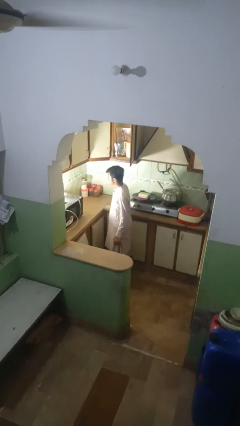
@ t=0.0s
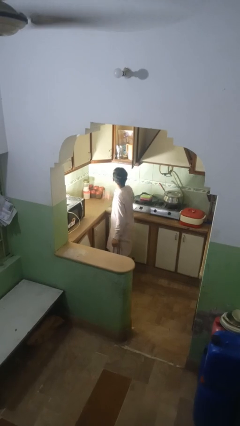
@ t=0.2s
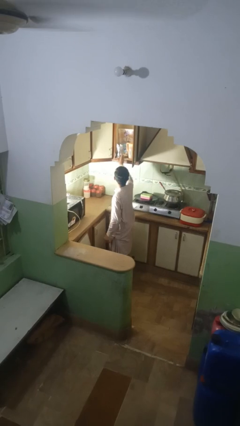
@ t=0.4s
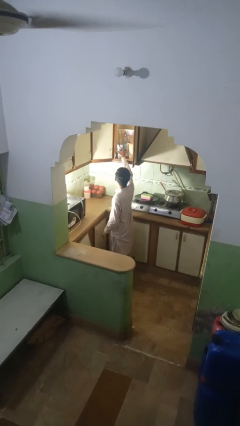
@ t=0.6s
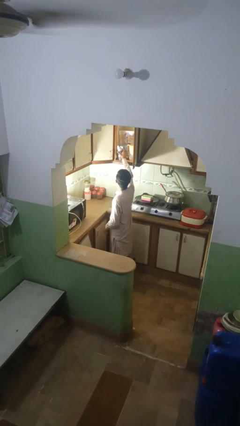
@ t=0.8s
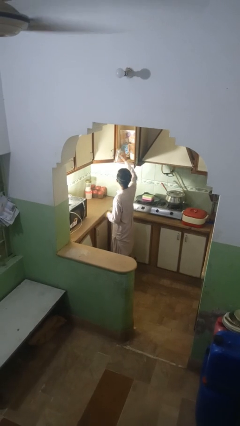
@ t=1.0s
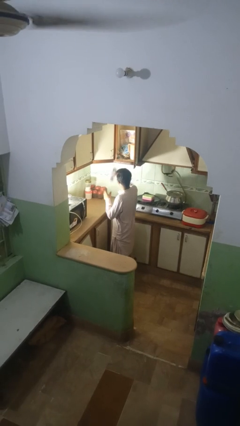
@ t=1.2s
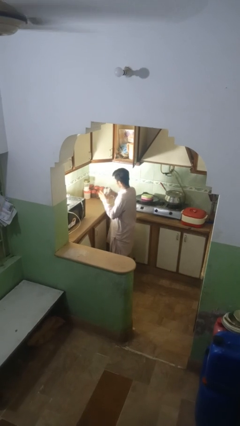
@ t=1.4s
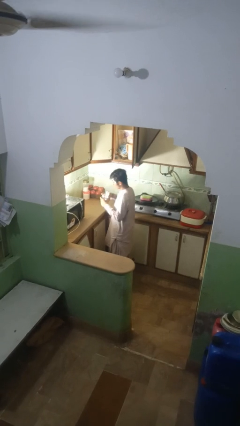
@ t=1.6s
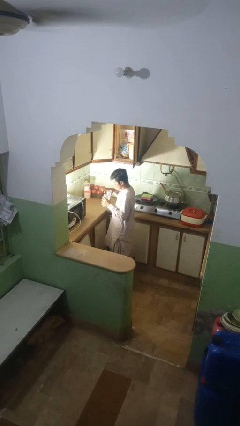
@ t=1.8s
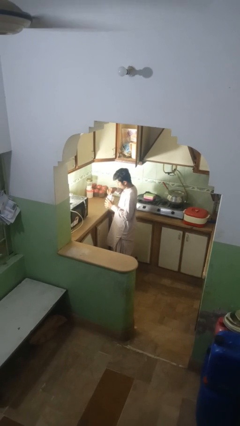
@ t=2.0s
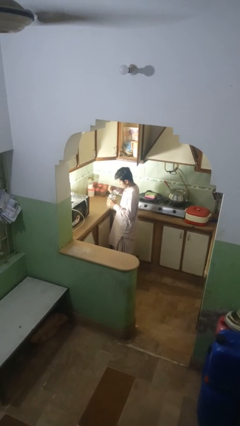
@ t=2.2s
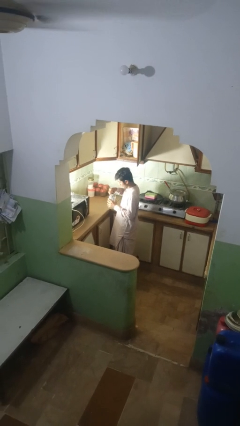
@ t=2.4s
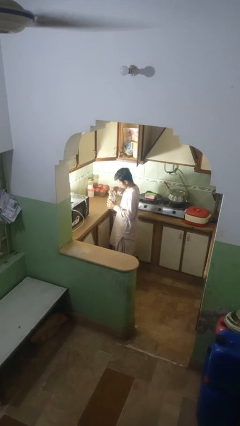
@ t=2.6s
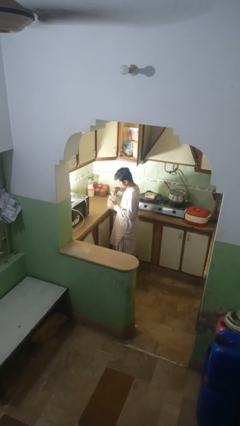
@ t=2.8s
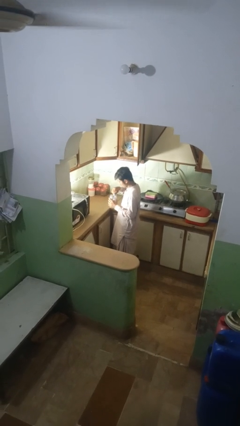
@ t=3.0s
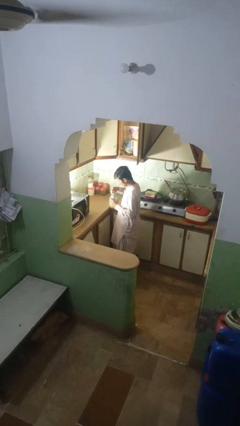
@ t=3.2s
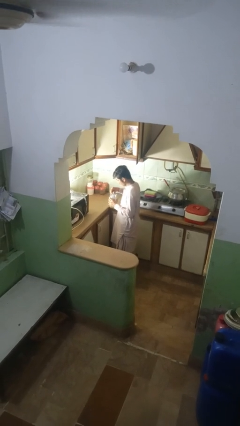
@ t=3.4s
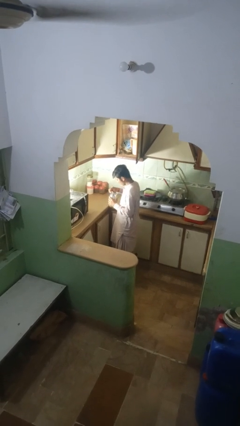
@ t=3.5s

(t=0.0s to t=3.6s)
person takes object from kitchen drawer

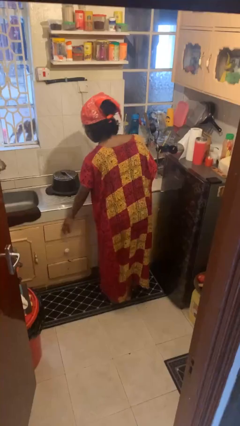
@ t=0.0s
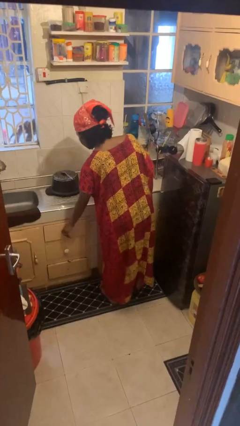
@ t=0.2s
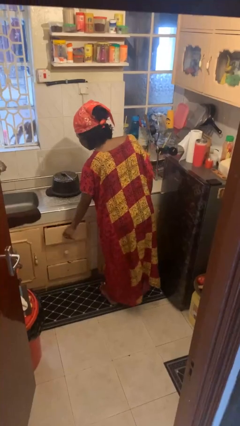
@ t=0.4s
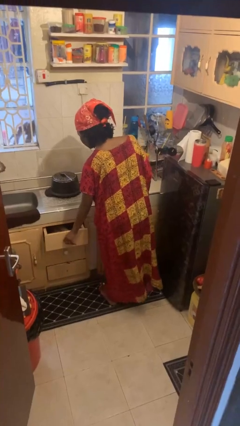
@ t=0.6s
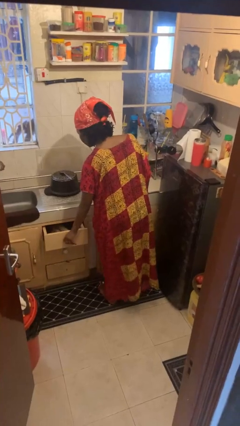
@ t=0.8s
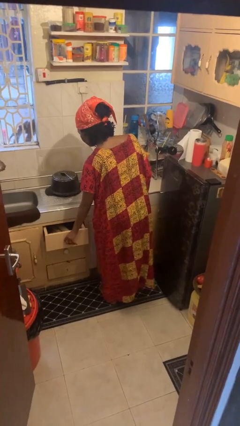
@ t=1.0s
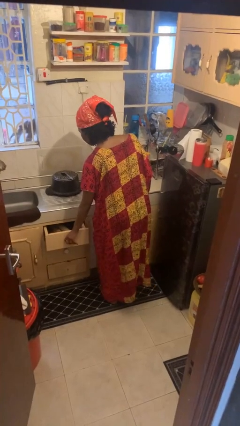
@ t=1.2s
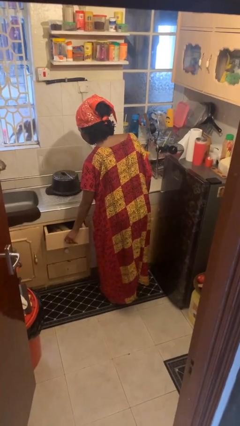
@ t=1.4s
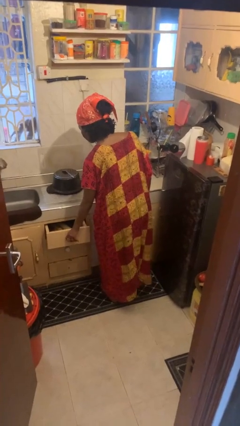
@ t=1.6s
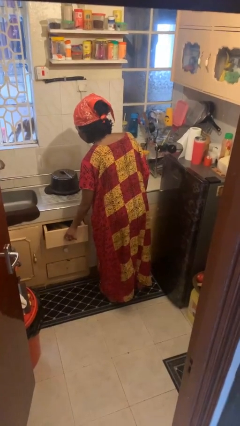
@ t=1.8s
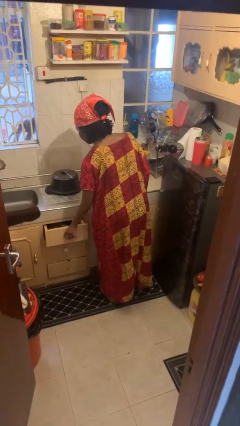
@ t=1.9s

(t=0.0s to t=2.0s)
person opens kitchen drawer

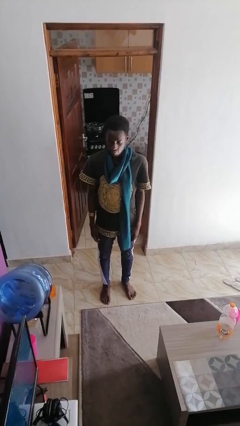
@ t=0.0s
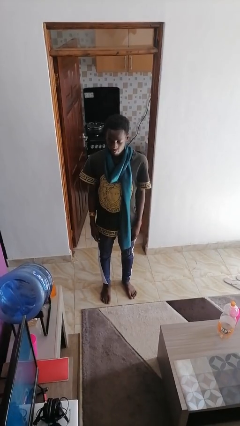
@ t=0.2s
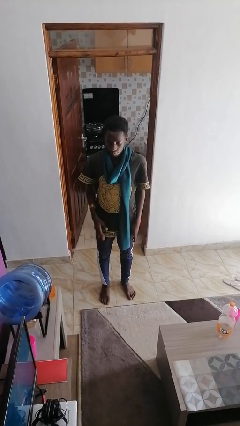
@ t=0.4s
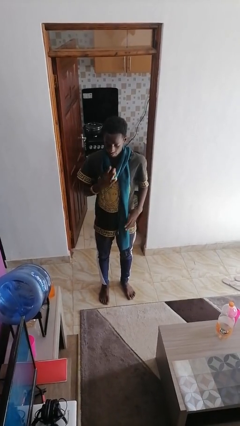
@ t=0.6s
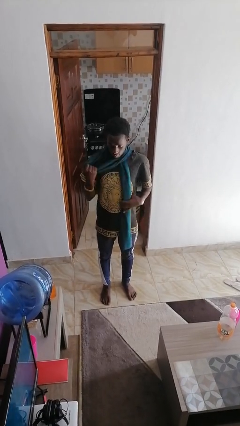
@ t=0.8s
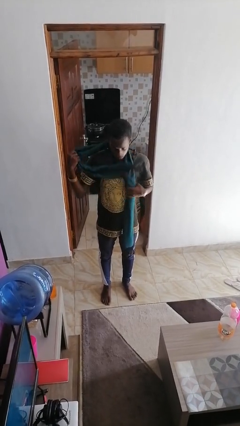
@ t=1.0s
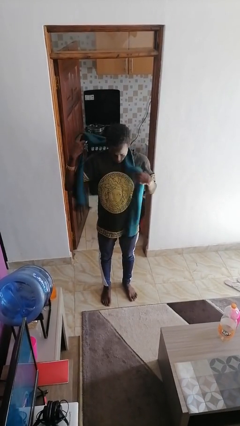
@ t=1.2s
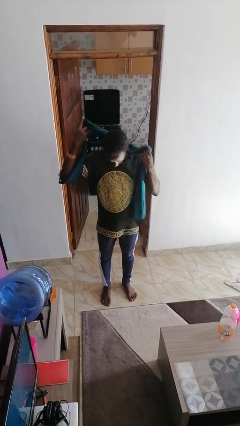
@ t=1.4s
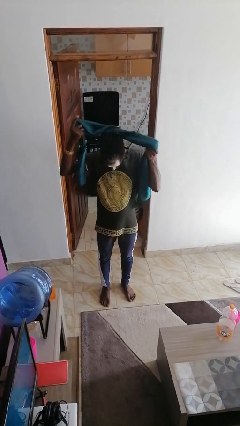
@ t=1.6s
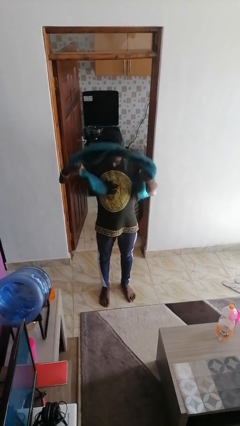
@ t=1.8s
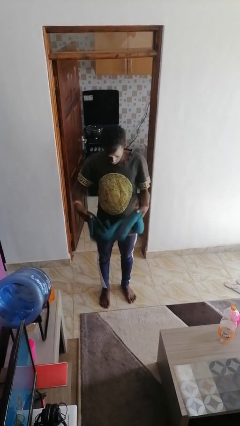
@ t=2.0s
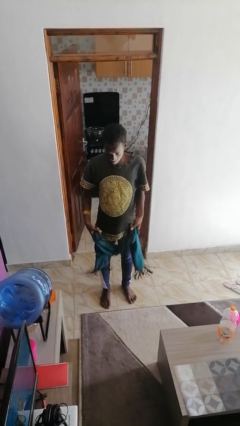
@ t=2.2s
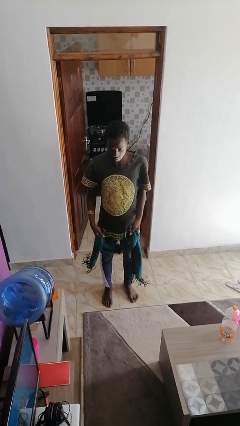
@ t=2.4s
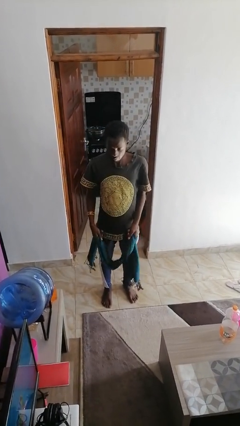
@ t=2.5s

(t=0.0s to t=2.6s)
person takes off scarf

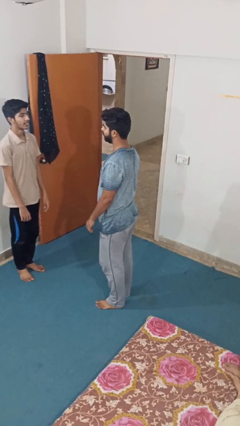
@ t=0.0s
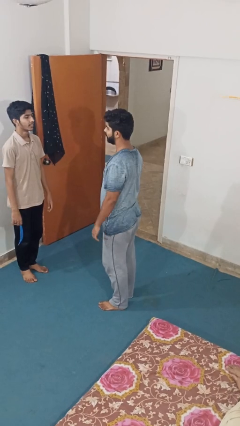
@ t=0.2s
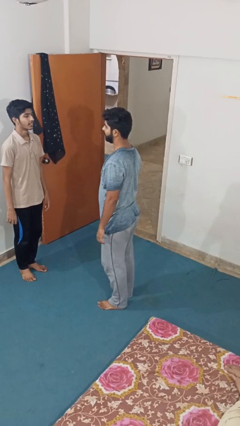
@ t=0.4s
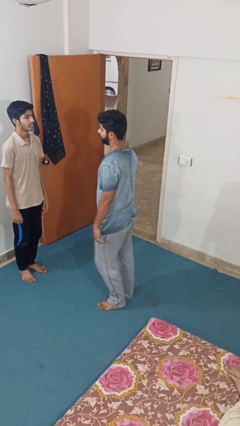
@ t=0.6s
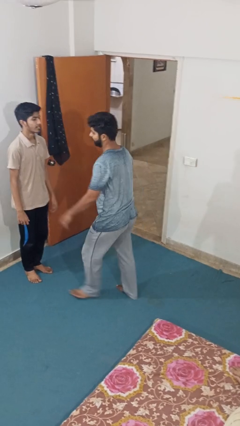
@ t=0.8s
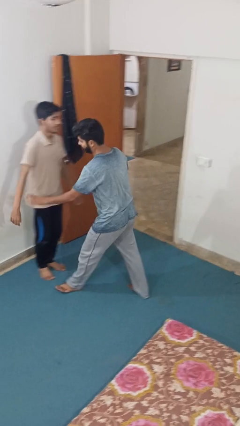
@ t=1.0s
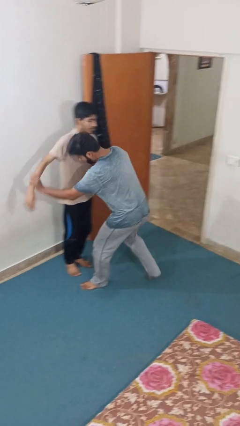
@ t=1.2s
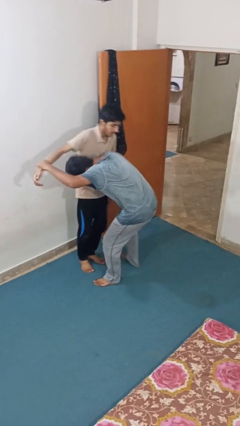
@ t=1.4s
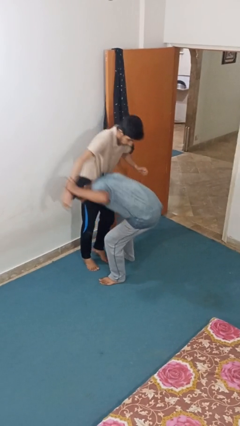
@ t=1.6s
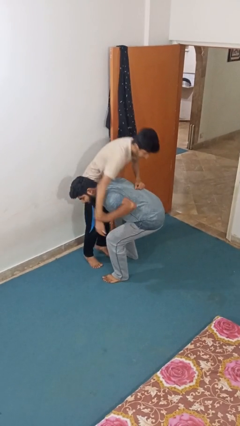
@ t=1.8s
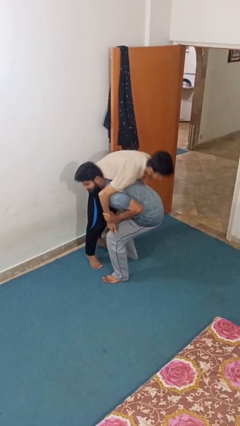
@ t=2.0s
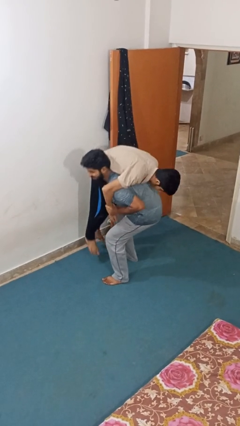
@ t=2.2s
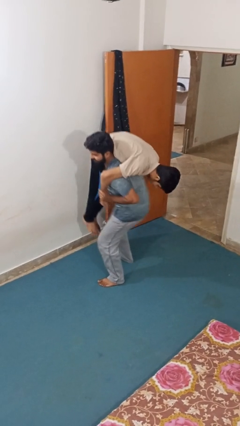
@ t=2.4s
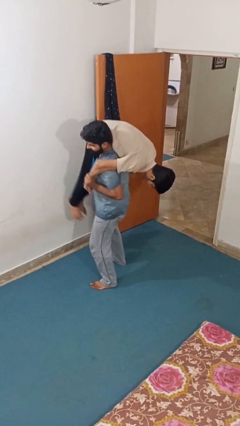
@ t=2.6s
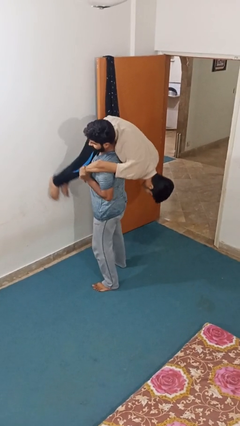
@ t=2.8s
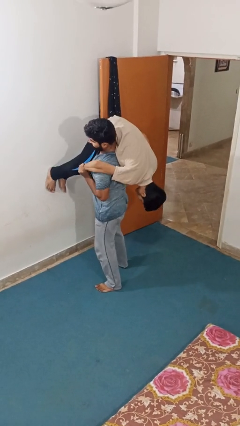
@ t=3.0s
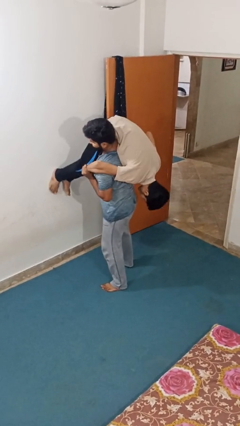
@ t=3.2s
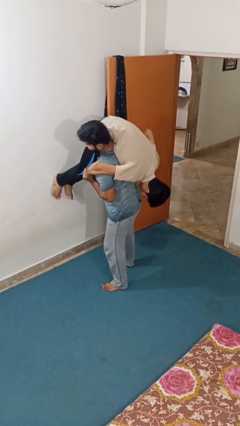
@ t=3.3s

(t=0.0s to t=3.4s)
person carries person over shoulder

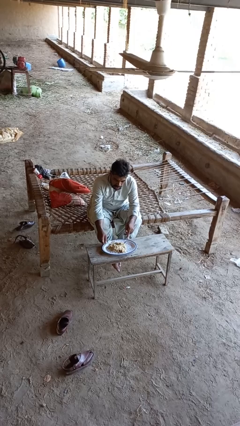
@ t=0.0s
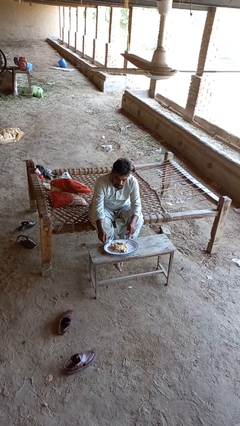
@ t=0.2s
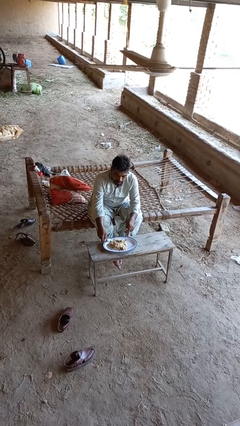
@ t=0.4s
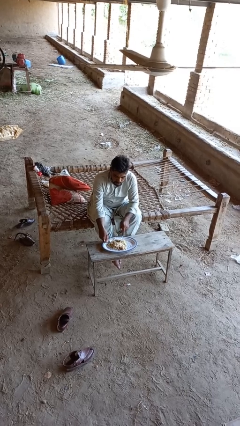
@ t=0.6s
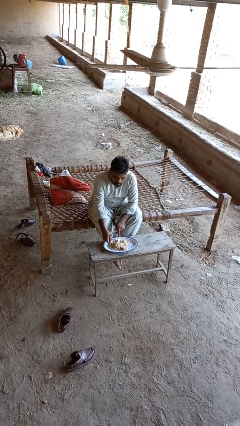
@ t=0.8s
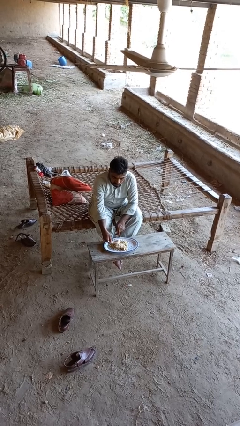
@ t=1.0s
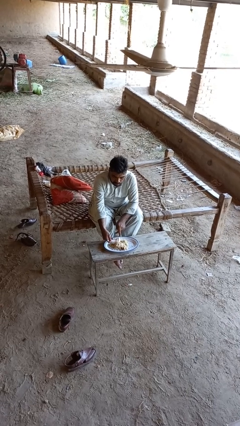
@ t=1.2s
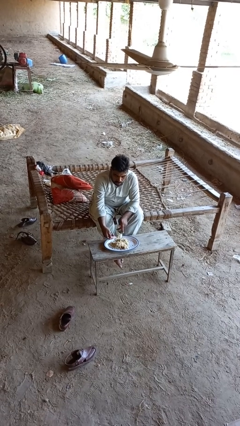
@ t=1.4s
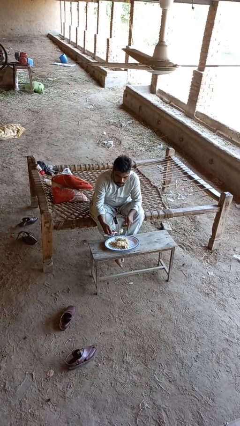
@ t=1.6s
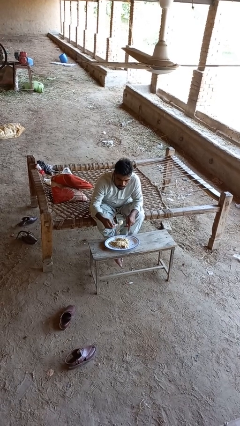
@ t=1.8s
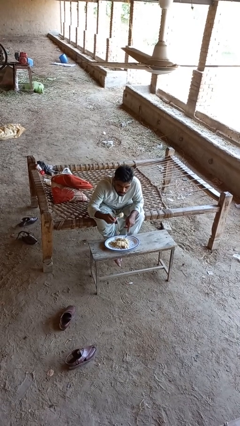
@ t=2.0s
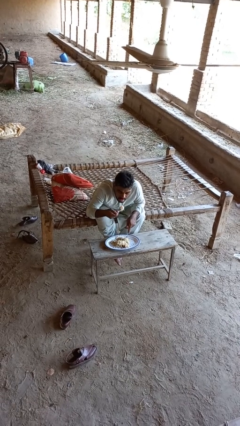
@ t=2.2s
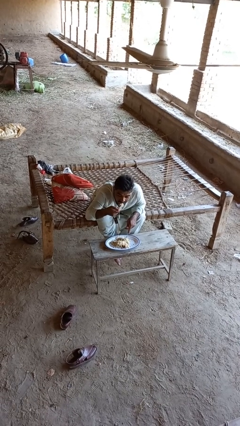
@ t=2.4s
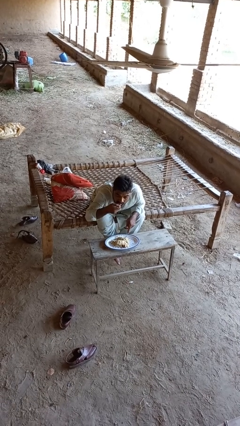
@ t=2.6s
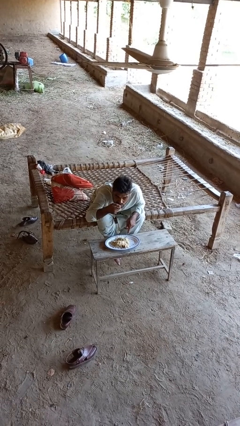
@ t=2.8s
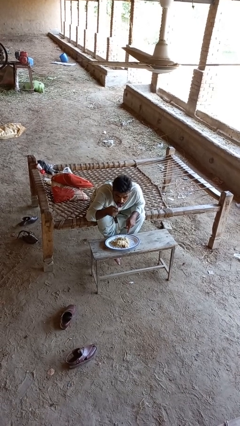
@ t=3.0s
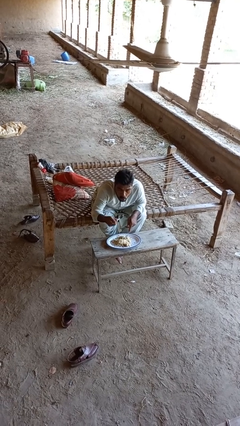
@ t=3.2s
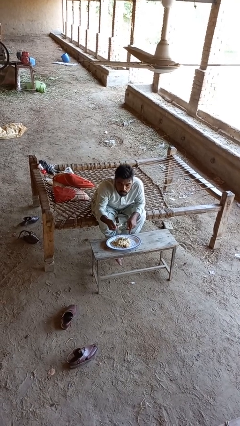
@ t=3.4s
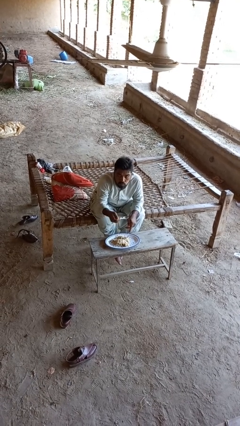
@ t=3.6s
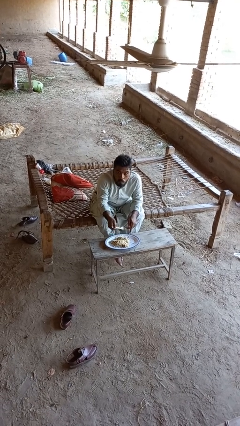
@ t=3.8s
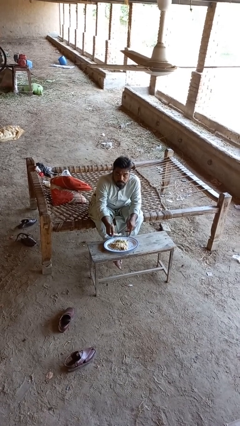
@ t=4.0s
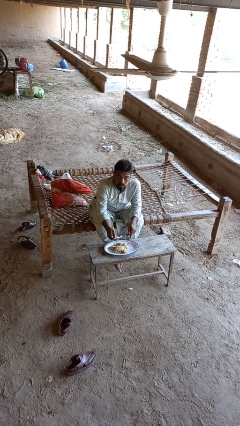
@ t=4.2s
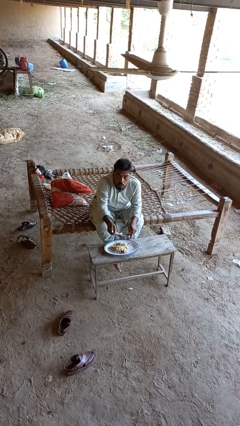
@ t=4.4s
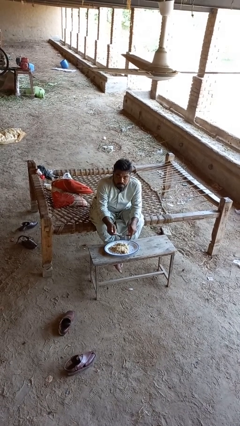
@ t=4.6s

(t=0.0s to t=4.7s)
person eats with utensil

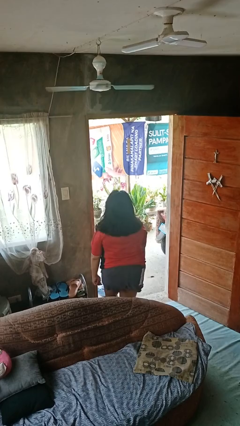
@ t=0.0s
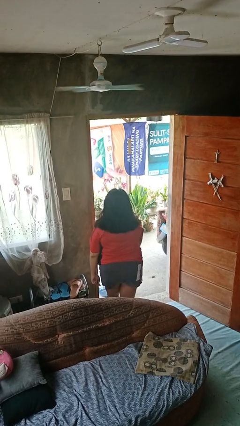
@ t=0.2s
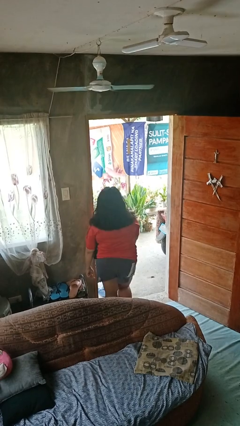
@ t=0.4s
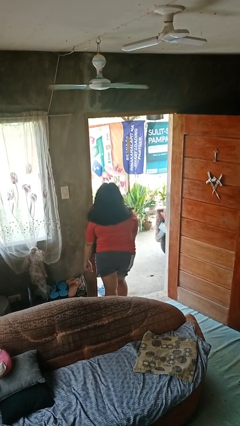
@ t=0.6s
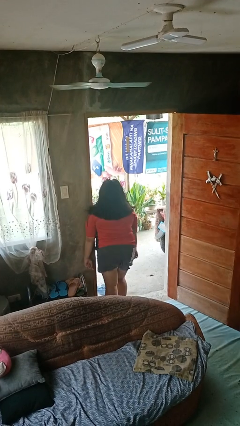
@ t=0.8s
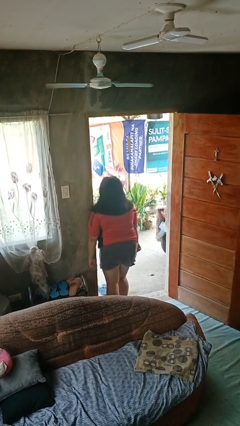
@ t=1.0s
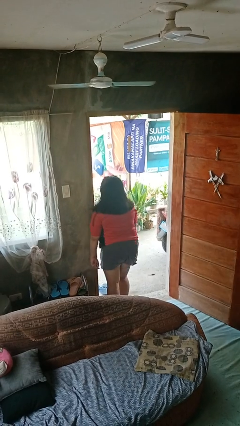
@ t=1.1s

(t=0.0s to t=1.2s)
person bumps into wall
